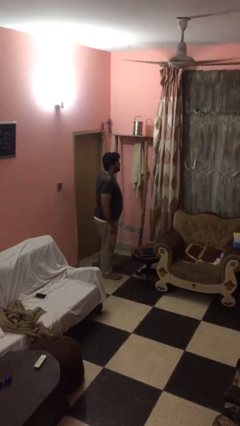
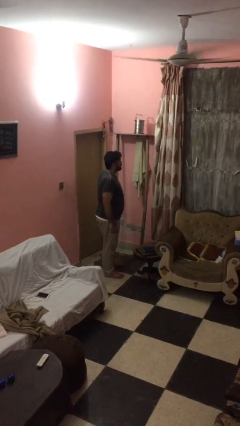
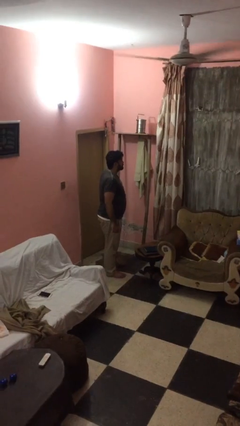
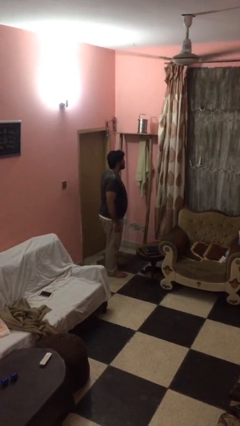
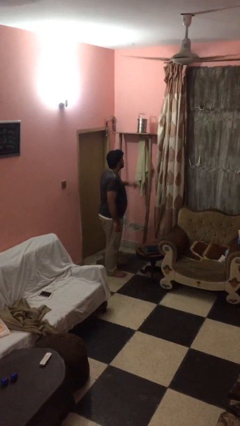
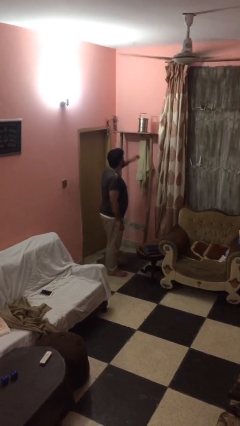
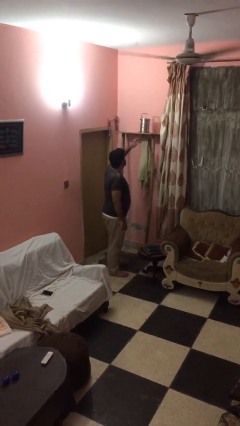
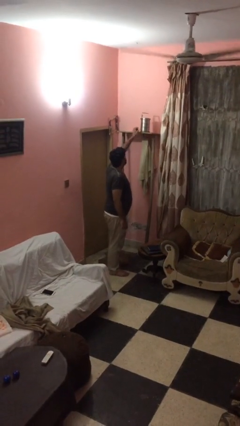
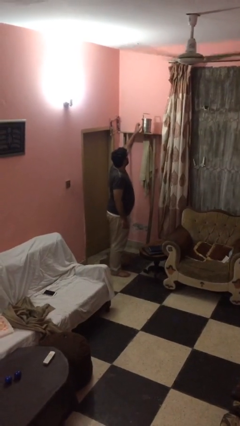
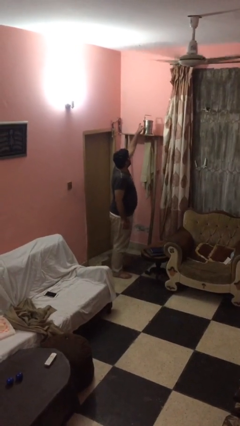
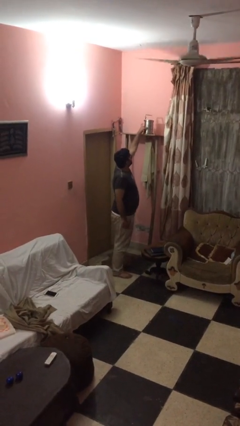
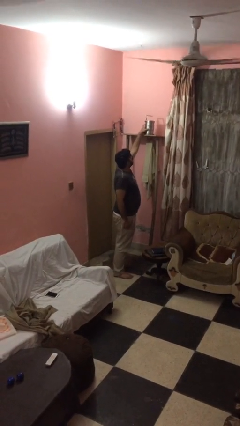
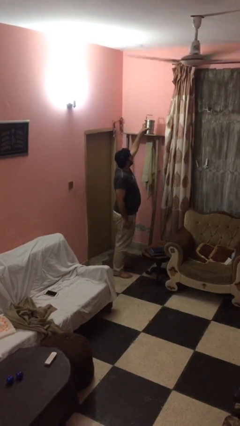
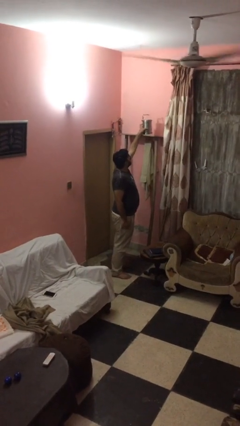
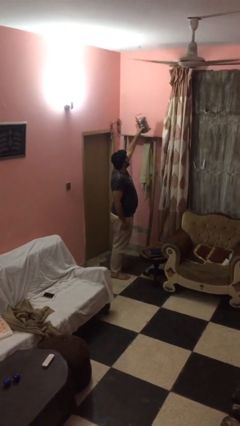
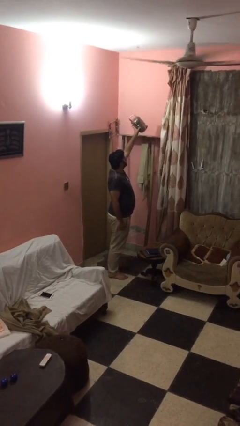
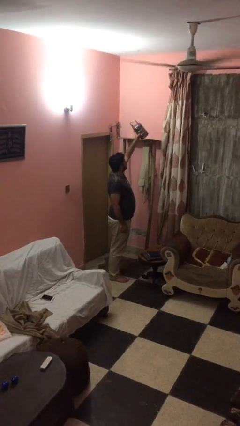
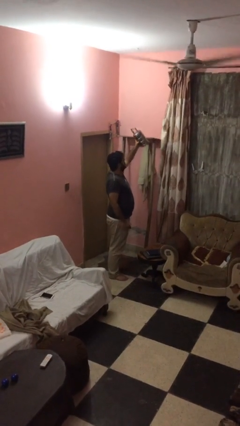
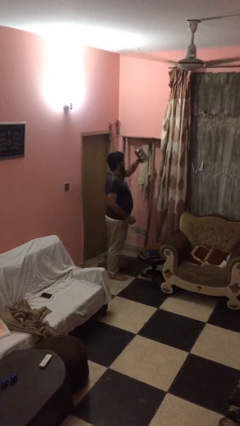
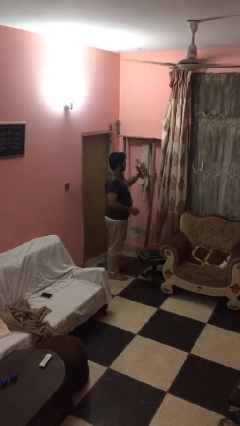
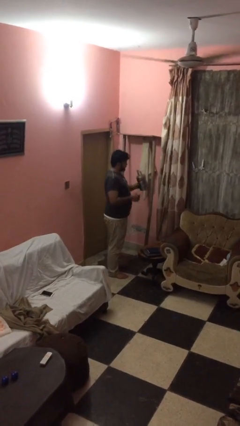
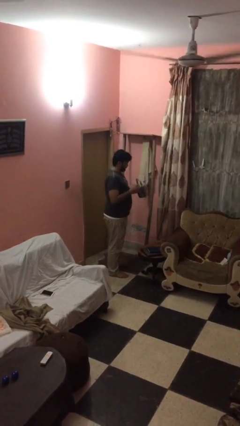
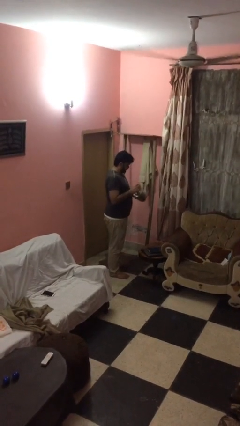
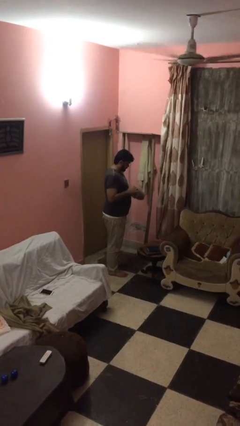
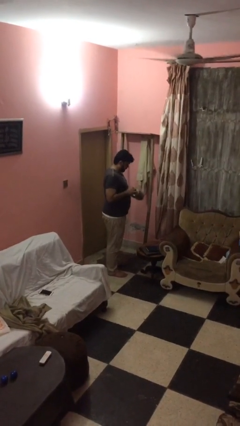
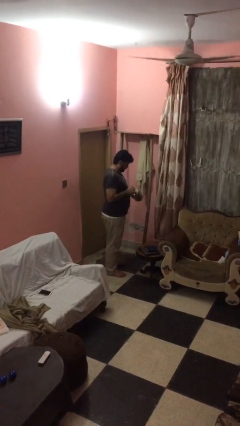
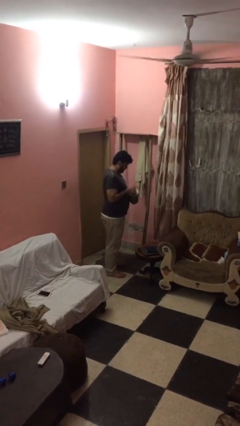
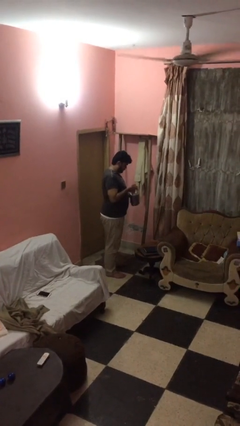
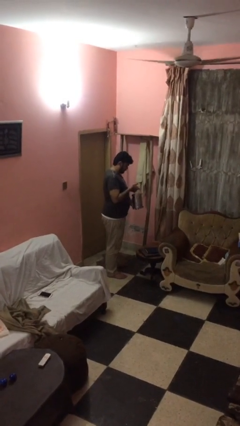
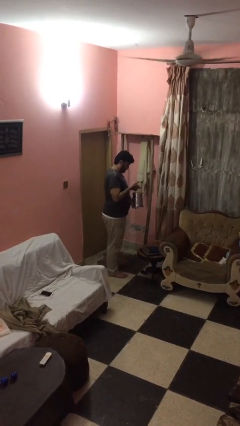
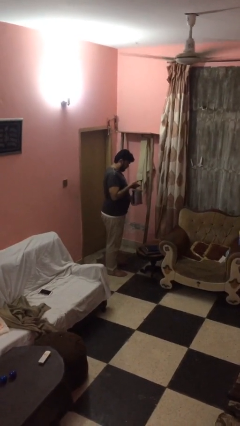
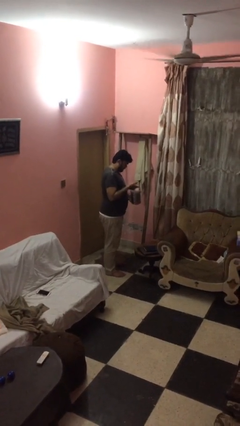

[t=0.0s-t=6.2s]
person picks up object from shelf

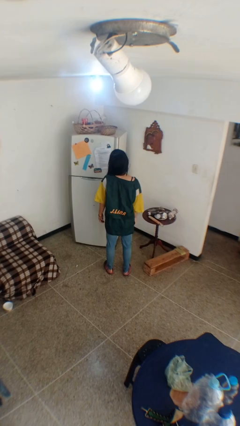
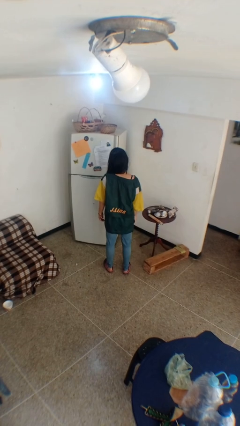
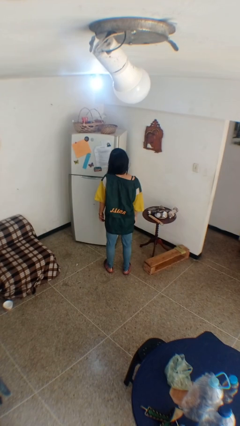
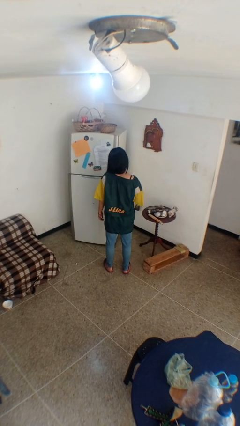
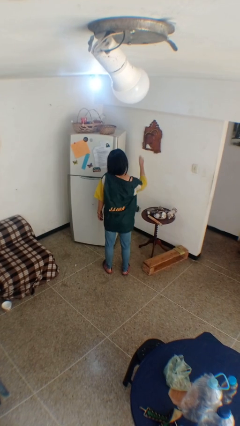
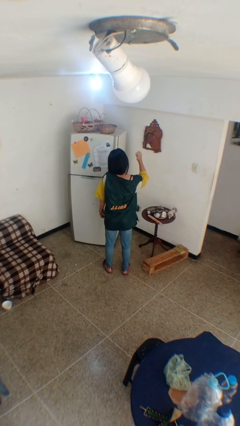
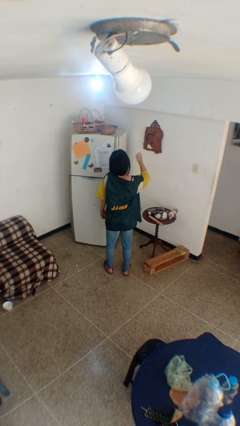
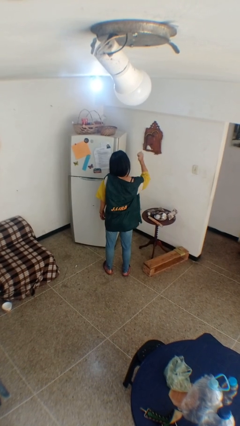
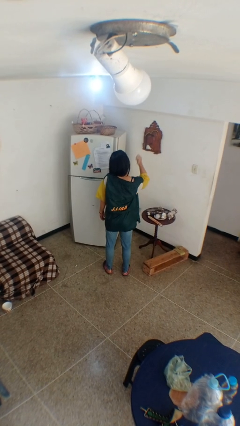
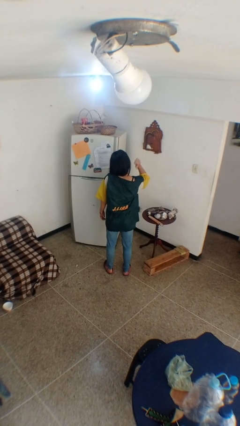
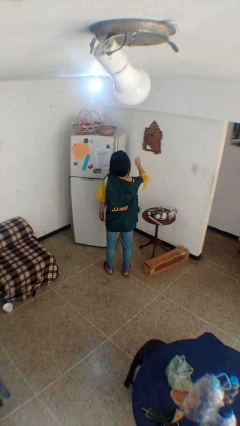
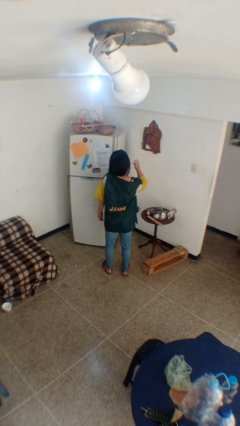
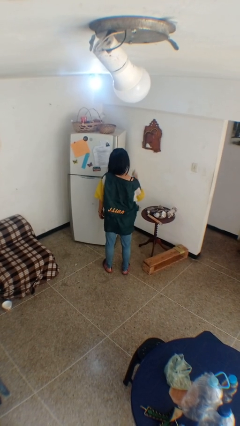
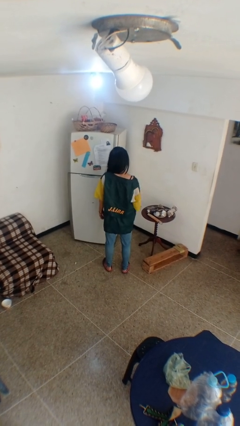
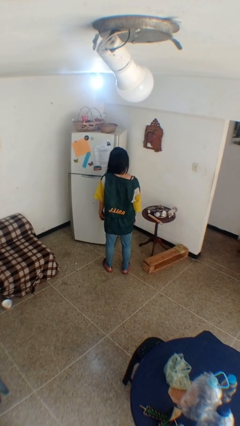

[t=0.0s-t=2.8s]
person gestures behind me

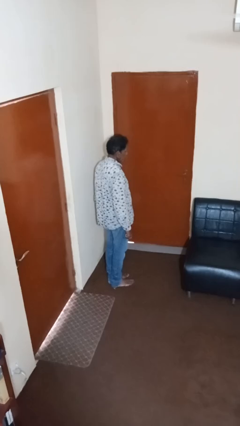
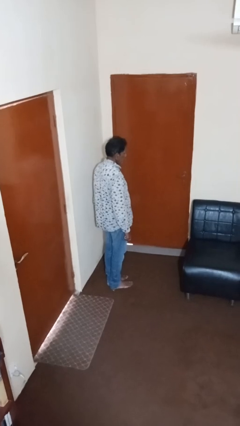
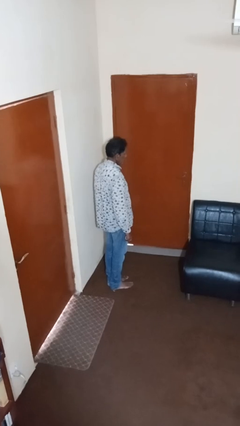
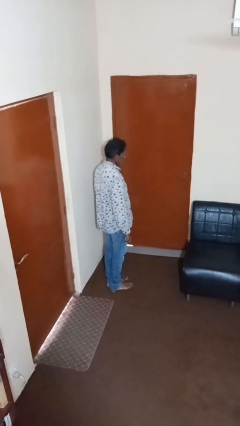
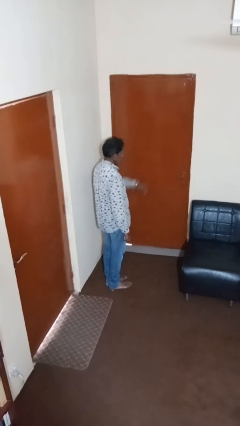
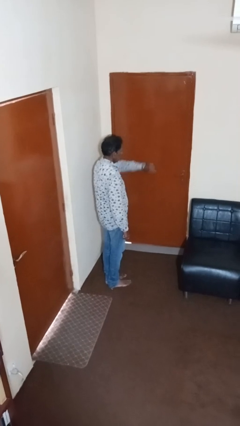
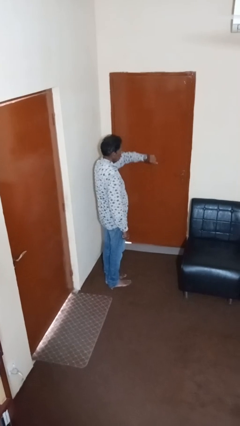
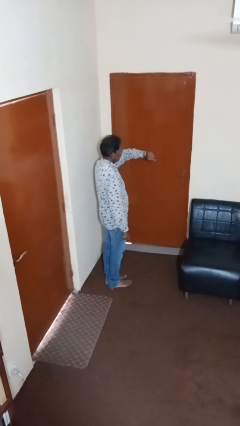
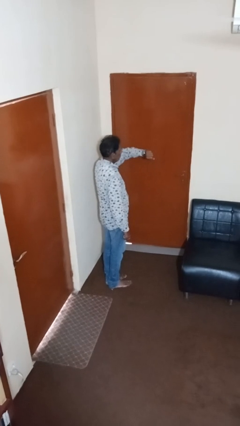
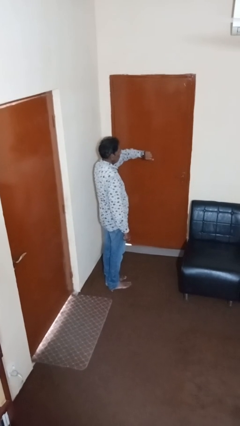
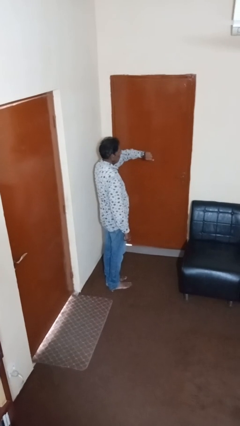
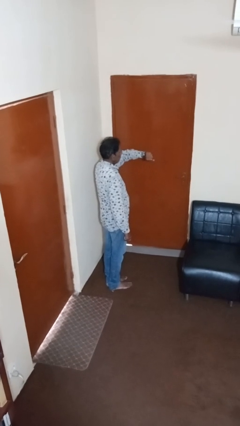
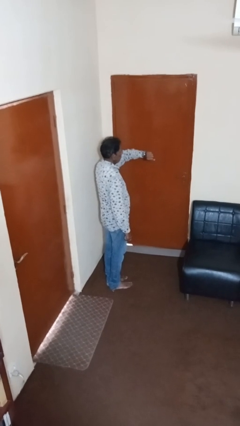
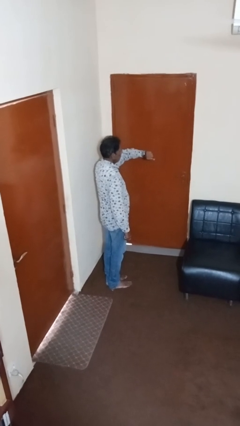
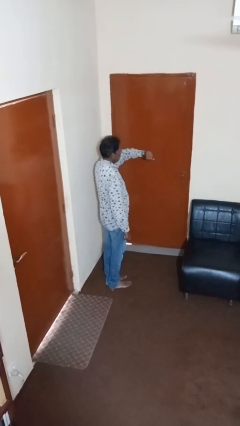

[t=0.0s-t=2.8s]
person looks at wristwatch

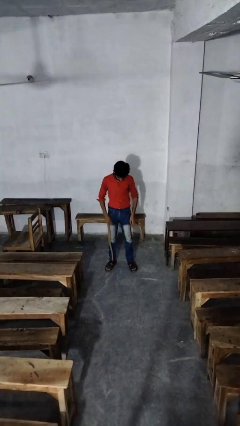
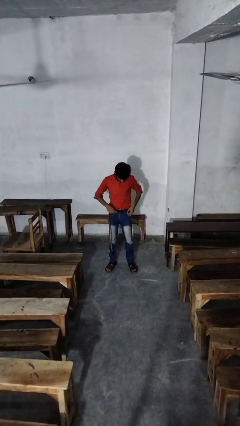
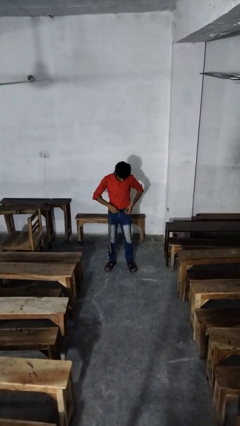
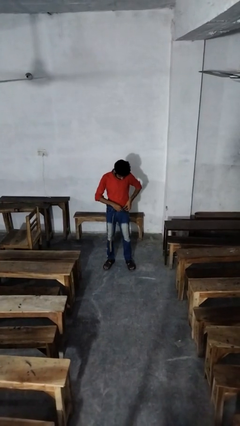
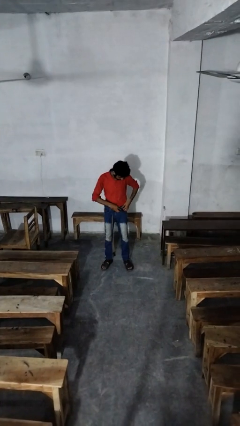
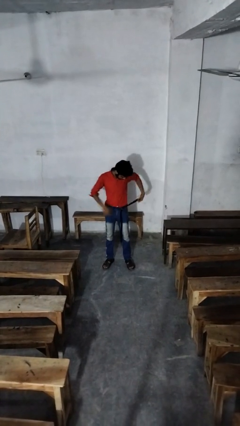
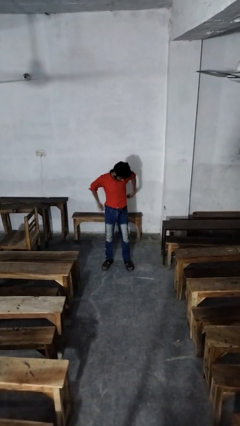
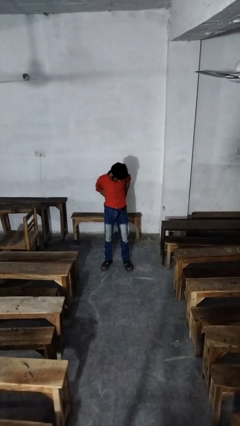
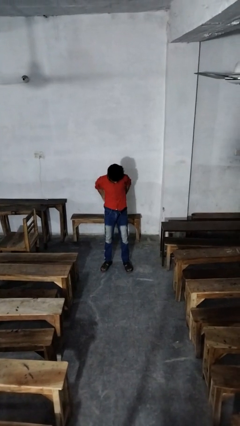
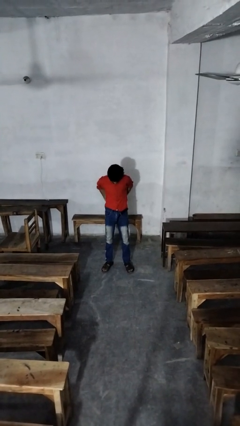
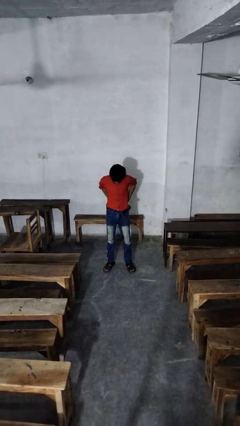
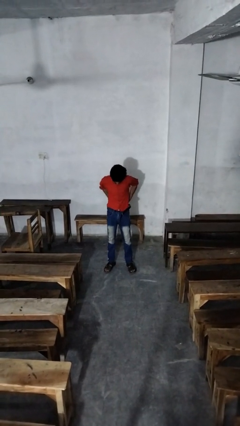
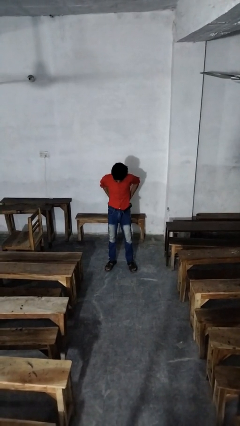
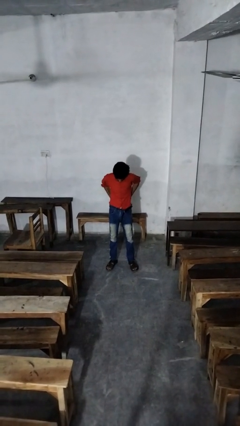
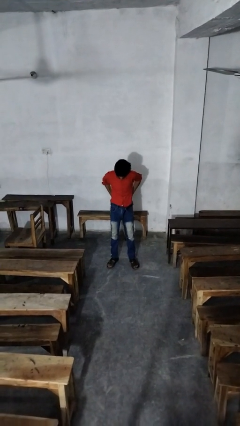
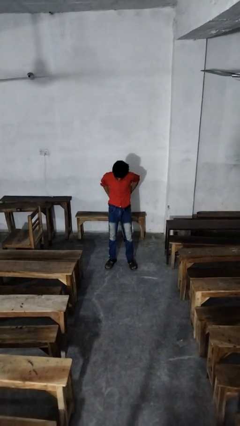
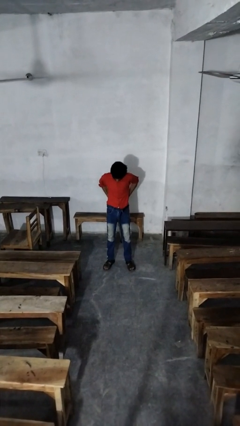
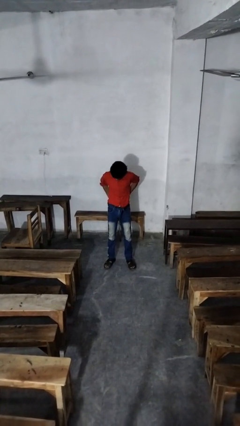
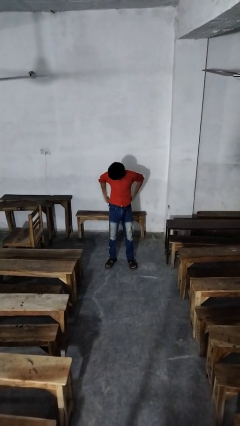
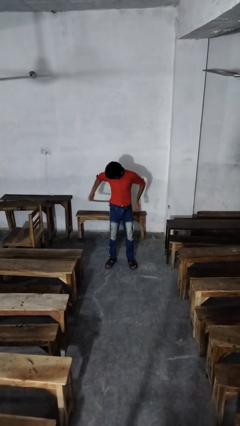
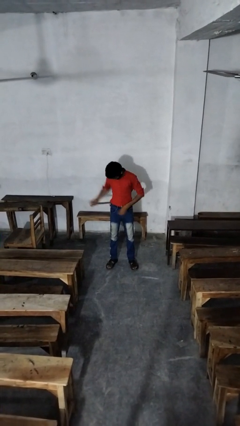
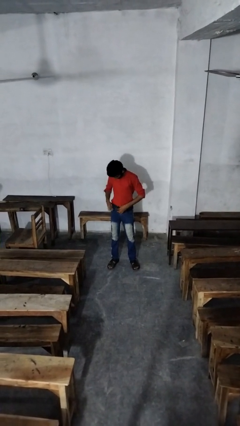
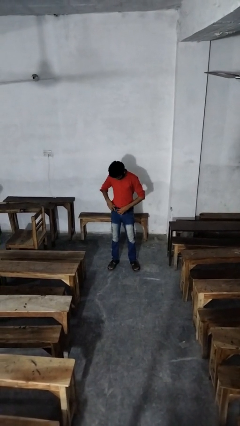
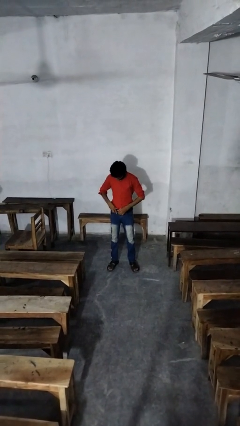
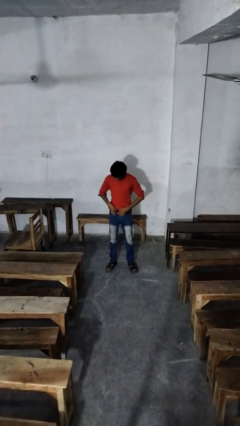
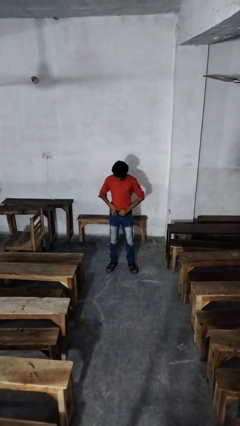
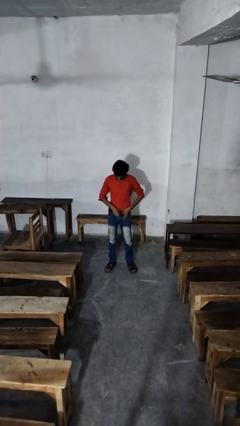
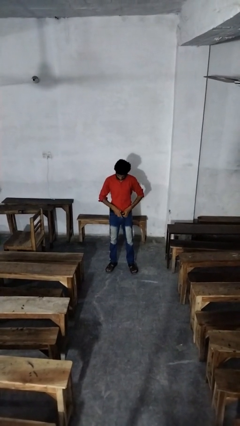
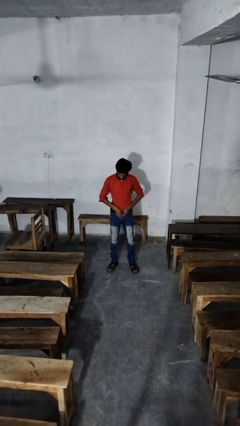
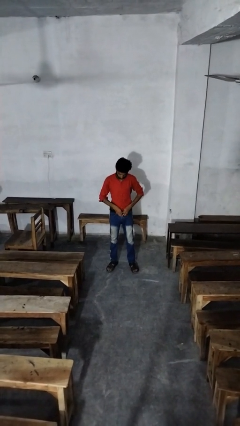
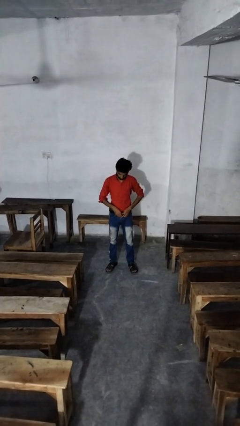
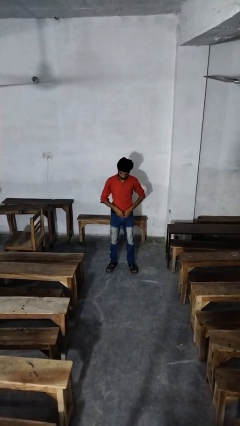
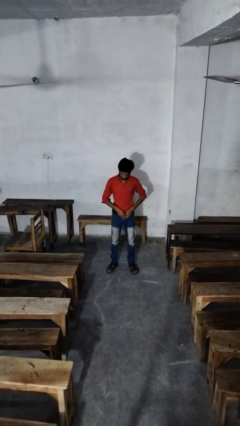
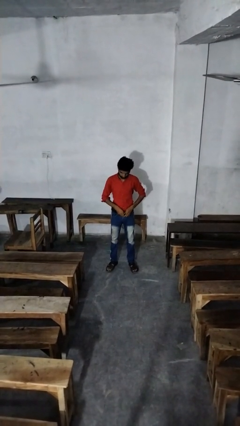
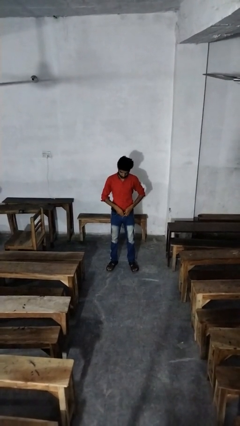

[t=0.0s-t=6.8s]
person puts on belt
